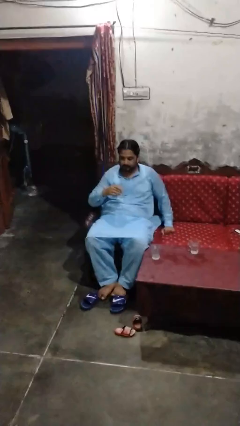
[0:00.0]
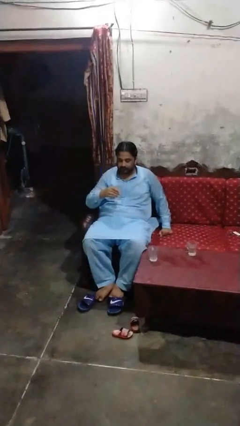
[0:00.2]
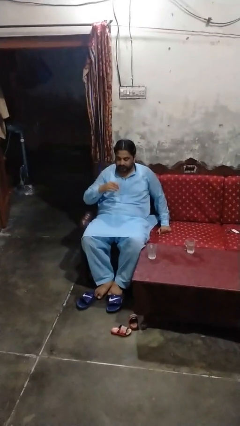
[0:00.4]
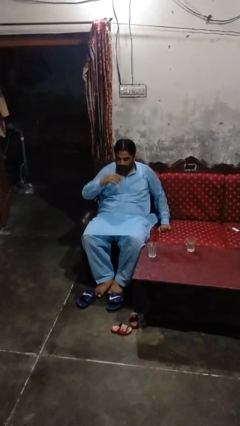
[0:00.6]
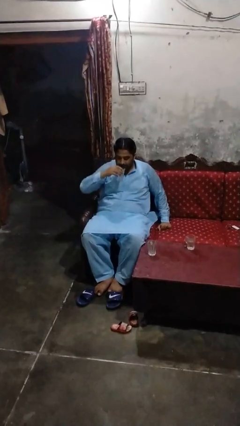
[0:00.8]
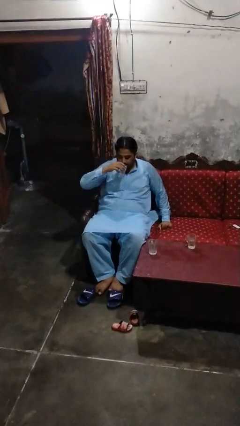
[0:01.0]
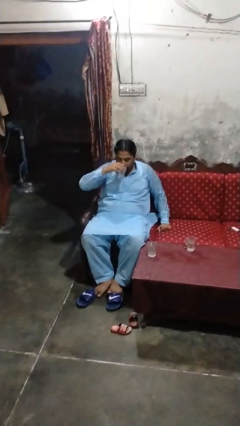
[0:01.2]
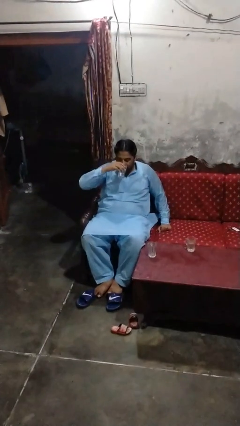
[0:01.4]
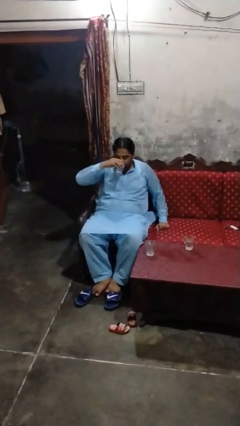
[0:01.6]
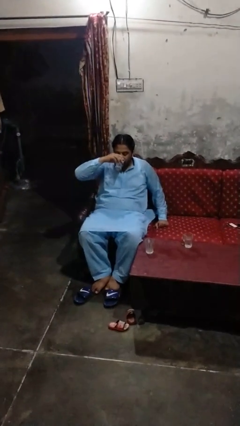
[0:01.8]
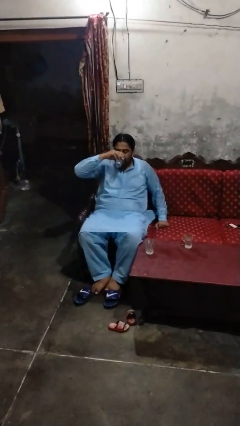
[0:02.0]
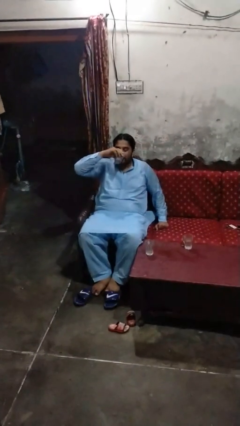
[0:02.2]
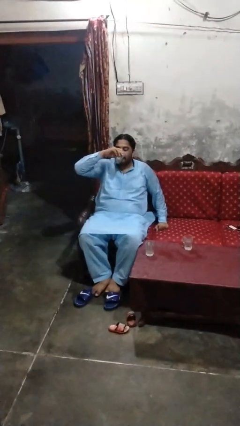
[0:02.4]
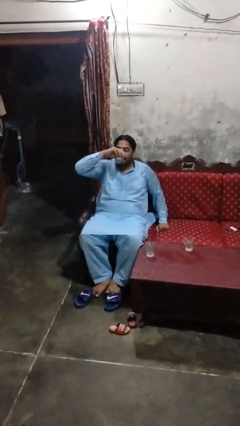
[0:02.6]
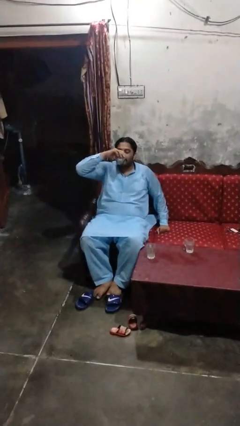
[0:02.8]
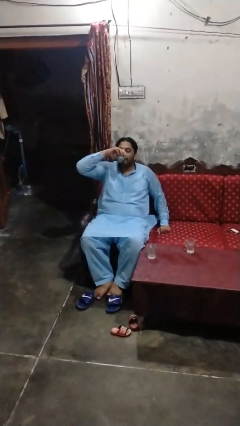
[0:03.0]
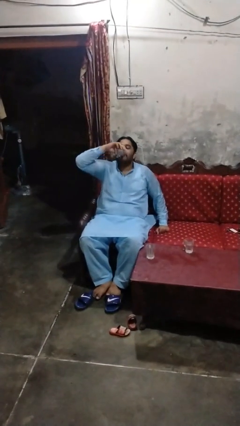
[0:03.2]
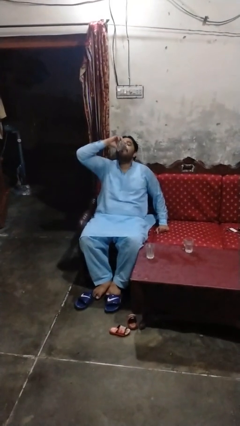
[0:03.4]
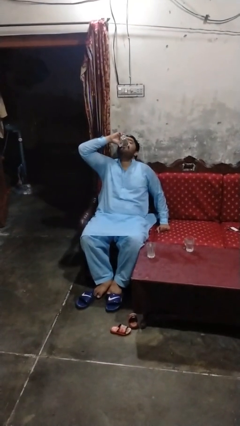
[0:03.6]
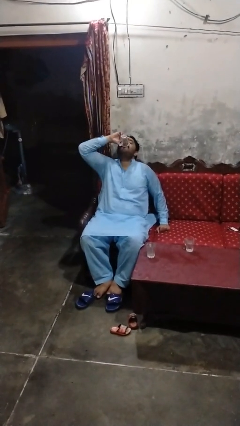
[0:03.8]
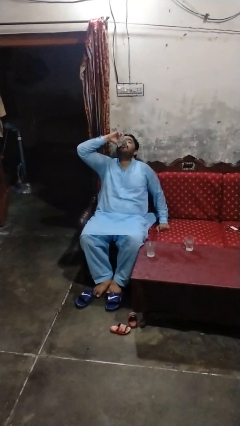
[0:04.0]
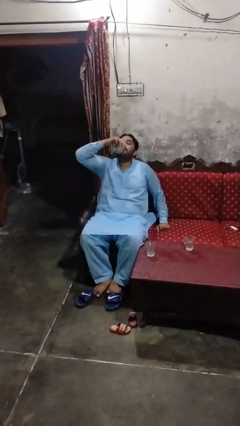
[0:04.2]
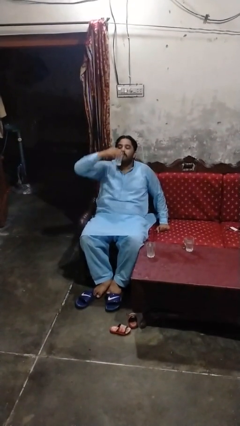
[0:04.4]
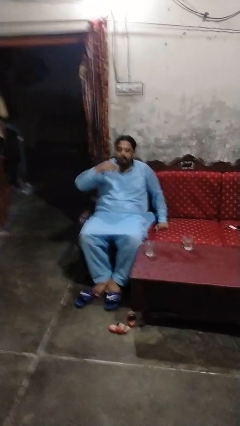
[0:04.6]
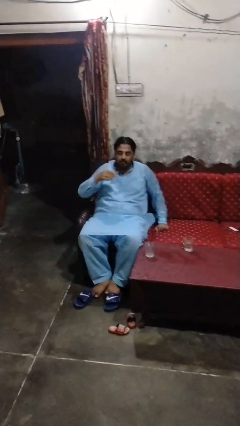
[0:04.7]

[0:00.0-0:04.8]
person drinks from shotglass

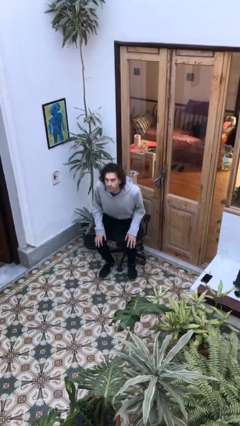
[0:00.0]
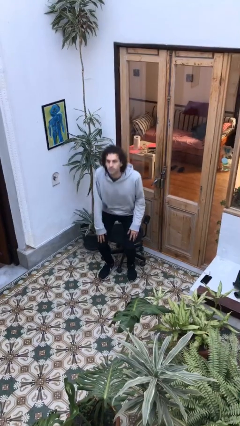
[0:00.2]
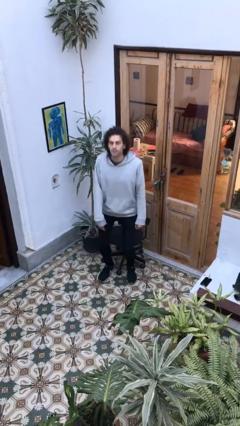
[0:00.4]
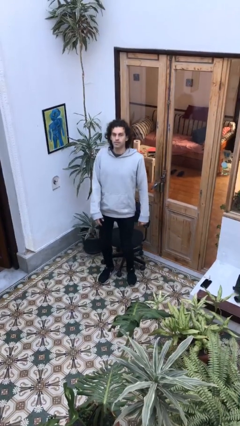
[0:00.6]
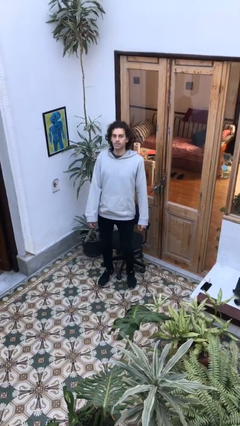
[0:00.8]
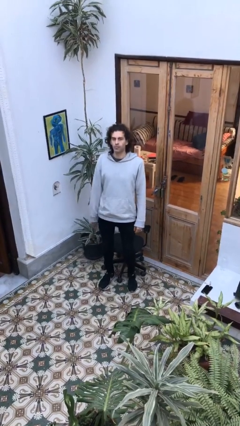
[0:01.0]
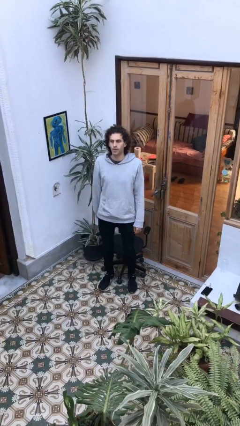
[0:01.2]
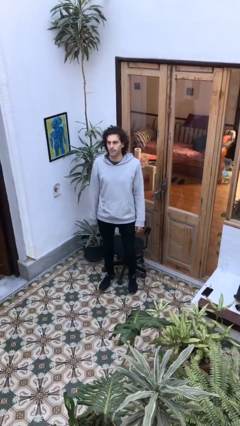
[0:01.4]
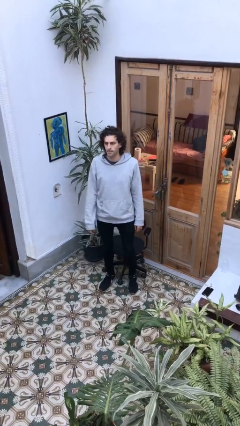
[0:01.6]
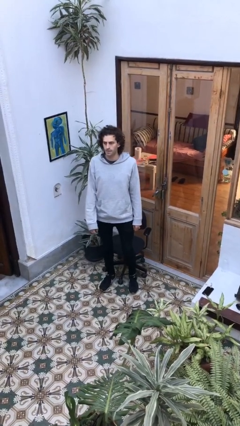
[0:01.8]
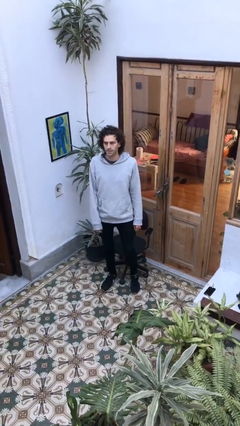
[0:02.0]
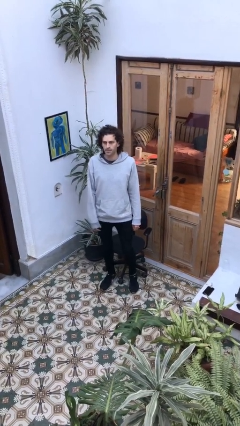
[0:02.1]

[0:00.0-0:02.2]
person stands up

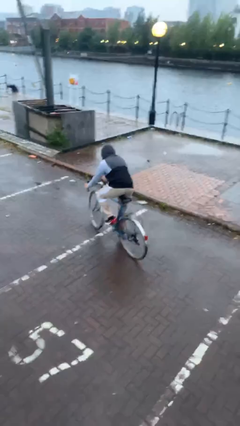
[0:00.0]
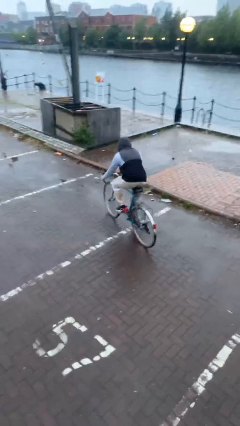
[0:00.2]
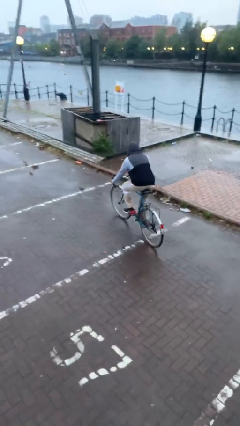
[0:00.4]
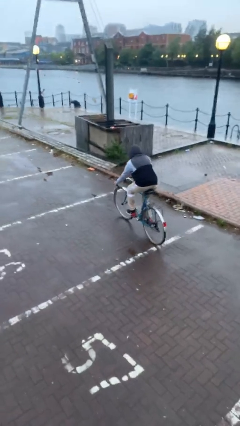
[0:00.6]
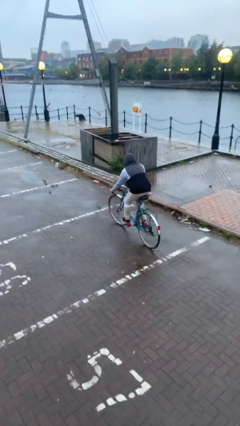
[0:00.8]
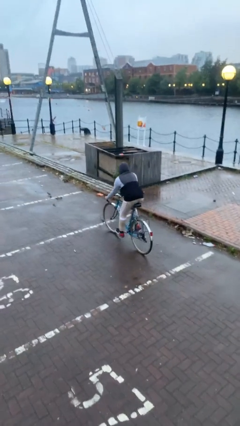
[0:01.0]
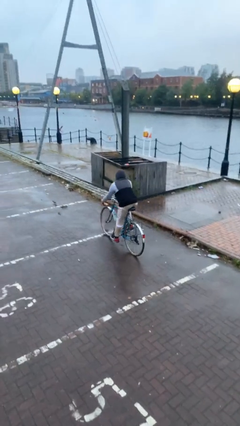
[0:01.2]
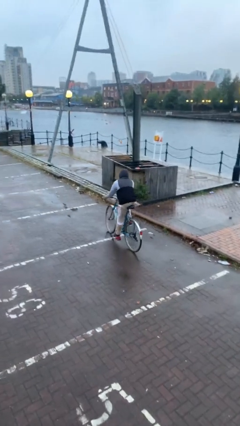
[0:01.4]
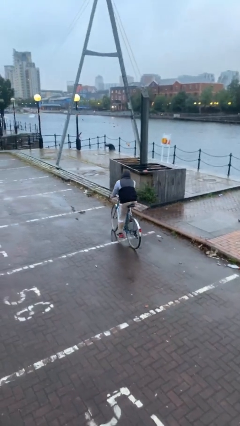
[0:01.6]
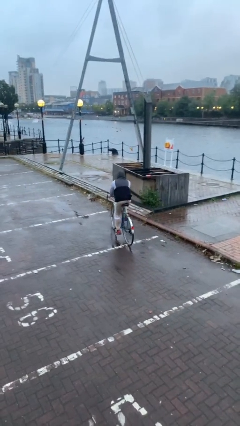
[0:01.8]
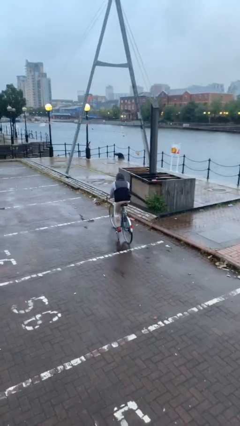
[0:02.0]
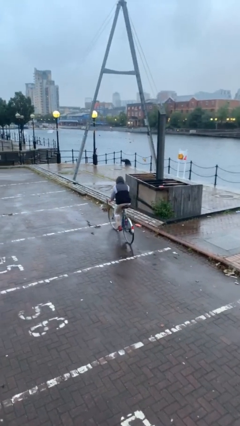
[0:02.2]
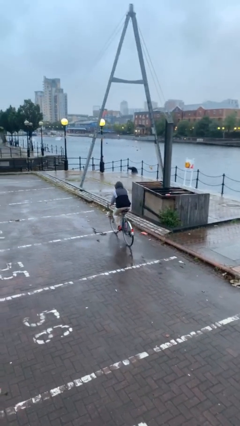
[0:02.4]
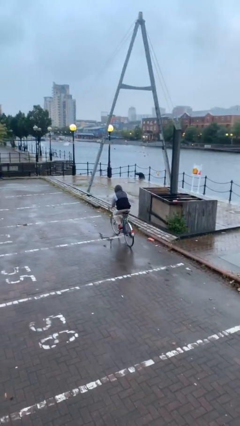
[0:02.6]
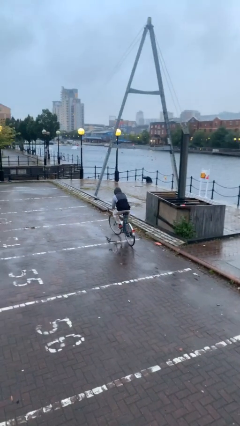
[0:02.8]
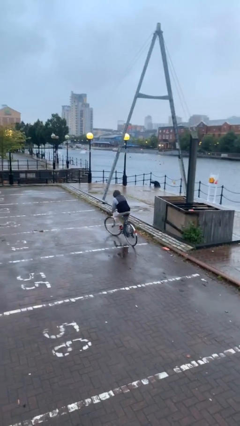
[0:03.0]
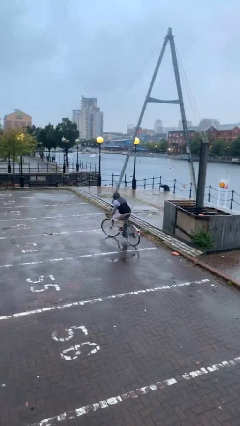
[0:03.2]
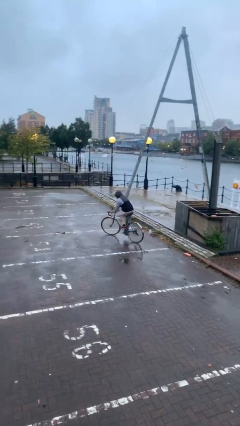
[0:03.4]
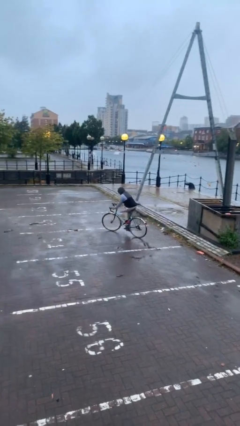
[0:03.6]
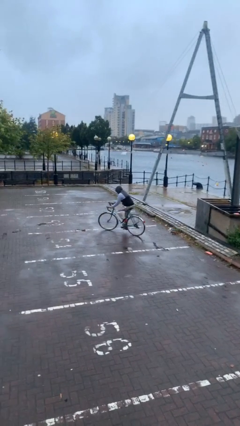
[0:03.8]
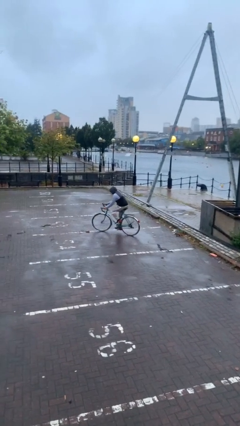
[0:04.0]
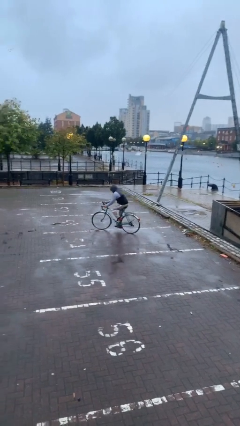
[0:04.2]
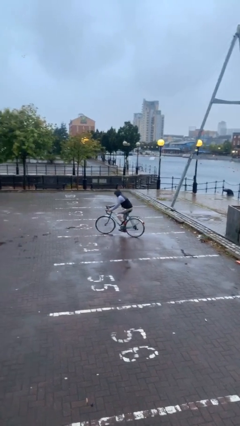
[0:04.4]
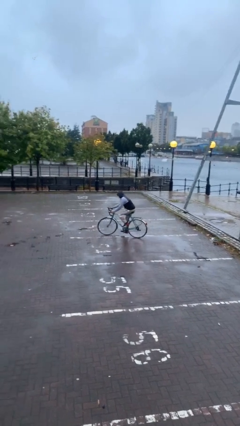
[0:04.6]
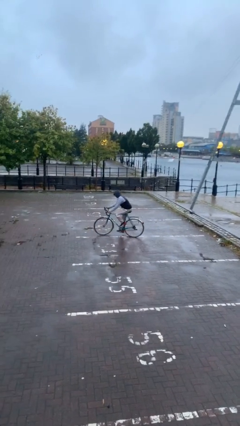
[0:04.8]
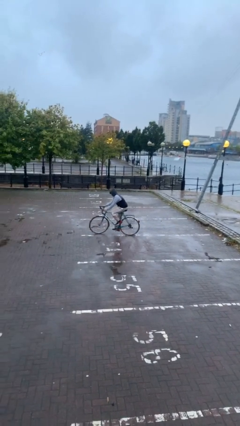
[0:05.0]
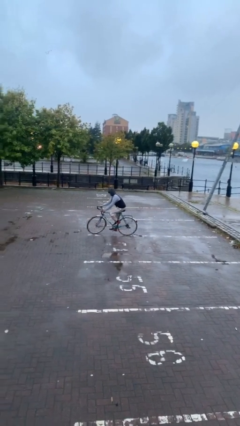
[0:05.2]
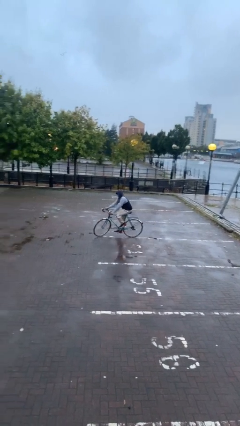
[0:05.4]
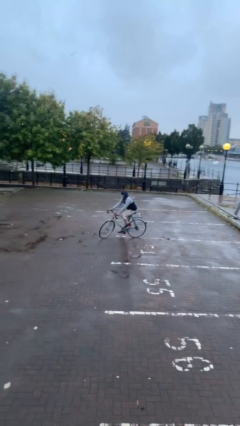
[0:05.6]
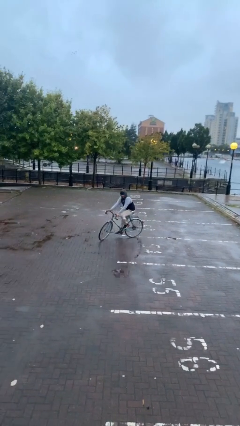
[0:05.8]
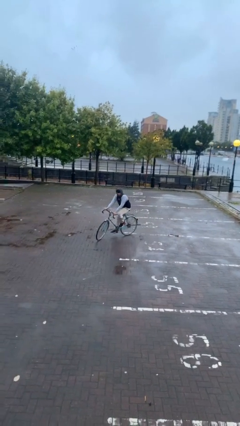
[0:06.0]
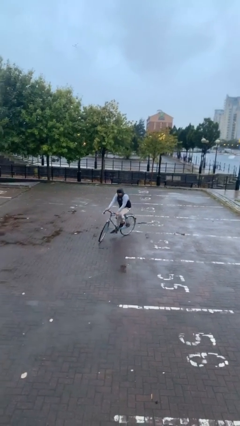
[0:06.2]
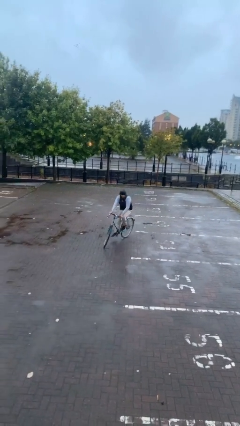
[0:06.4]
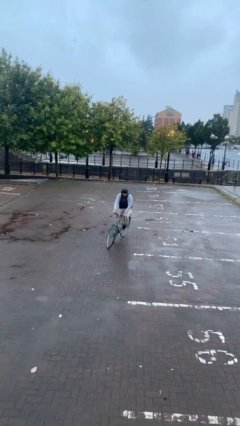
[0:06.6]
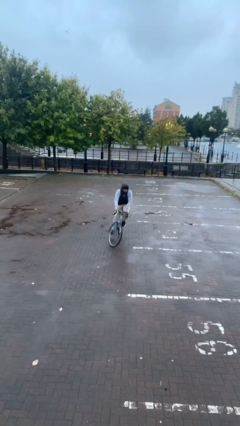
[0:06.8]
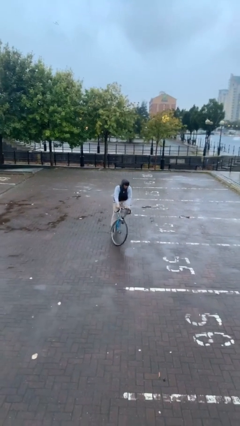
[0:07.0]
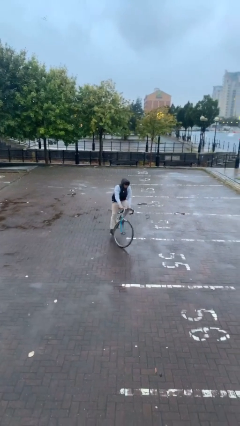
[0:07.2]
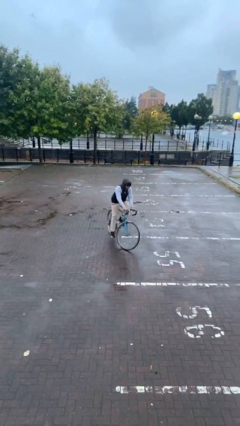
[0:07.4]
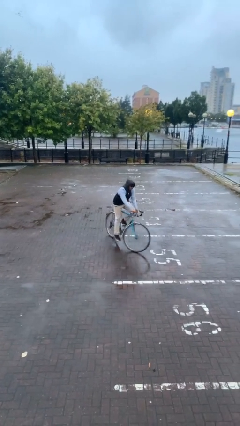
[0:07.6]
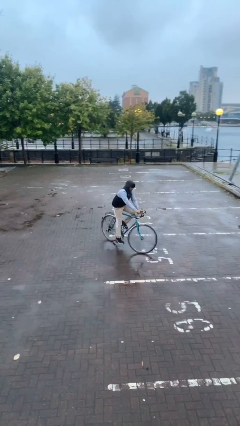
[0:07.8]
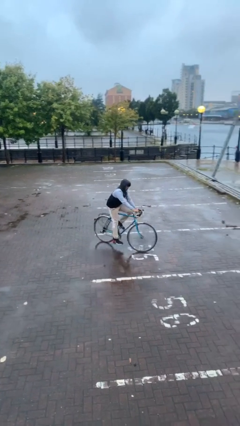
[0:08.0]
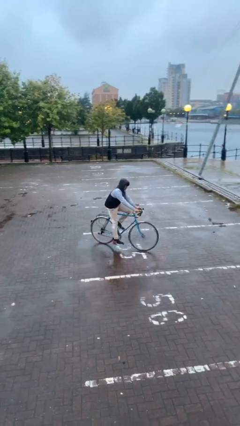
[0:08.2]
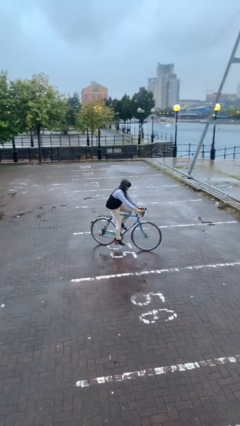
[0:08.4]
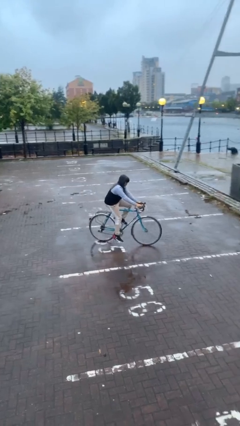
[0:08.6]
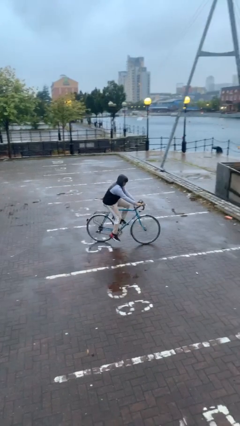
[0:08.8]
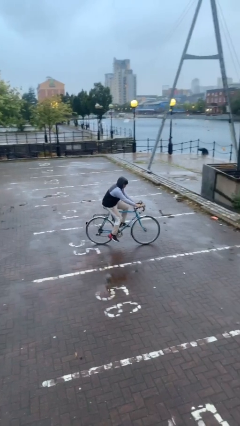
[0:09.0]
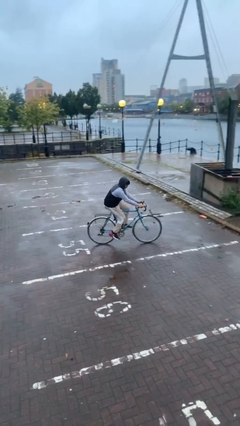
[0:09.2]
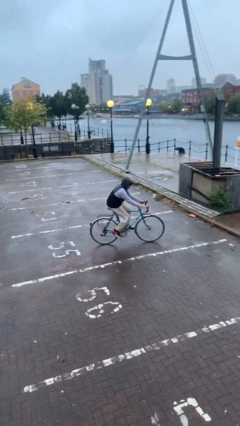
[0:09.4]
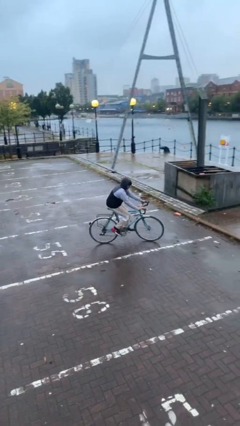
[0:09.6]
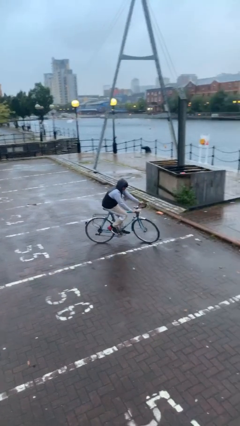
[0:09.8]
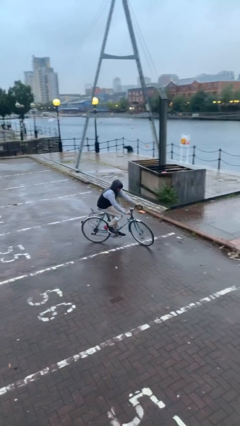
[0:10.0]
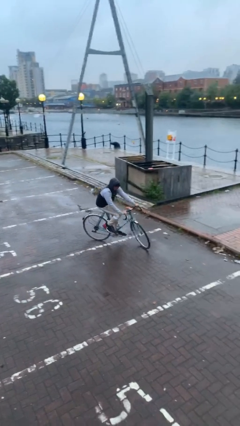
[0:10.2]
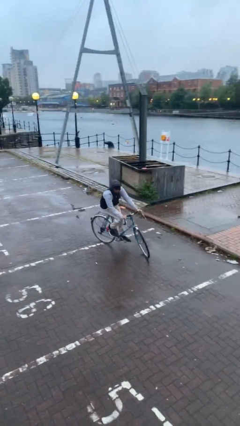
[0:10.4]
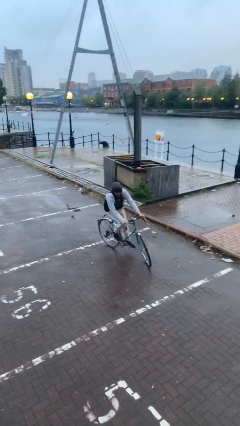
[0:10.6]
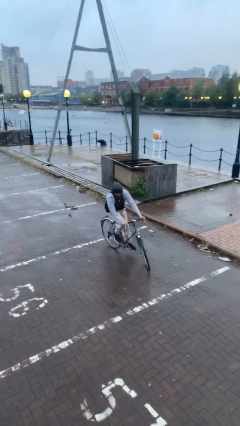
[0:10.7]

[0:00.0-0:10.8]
person rides bicycle
